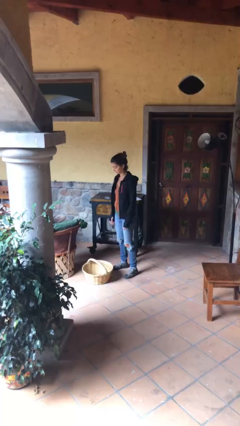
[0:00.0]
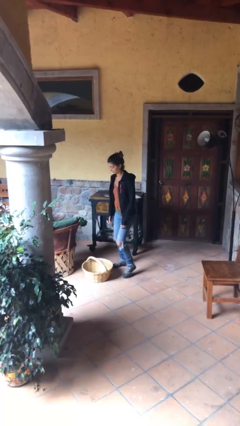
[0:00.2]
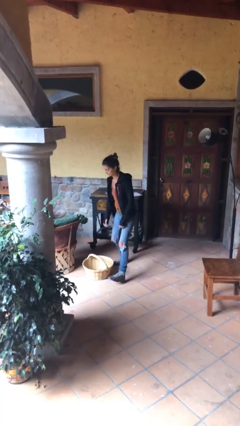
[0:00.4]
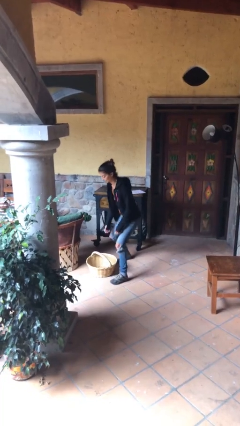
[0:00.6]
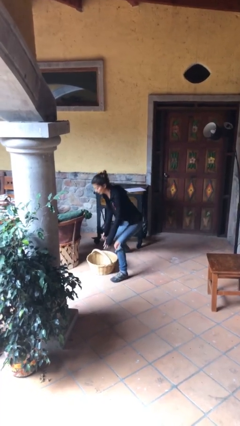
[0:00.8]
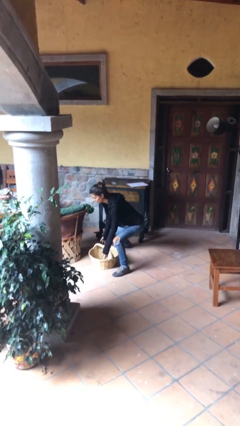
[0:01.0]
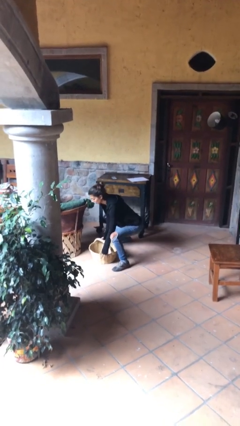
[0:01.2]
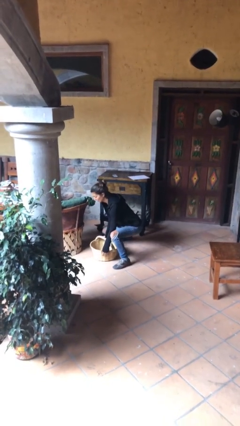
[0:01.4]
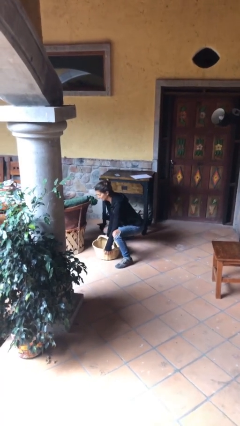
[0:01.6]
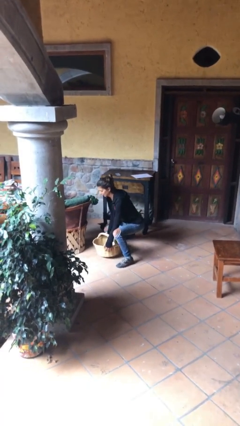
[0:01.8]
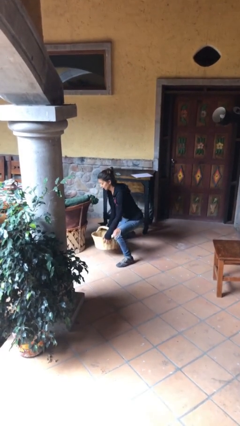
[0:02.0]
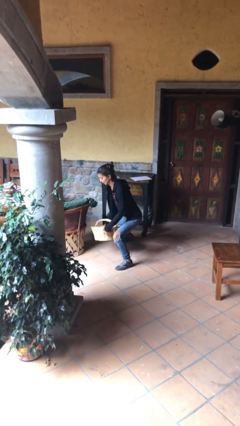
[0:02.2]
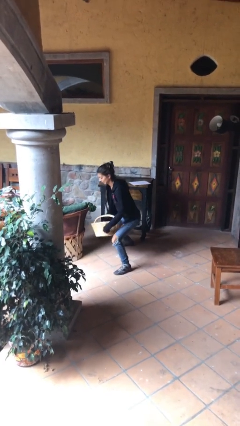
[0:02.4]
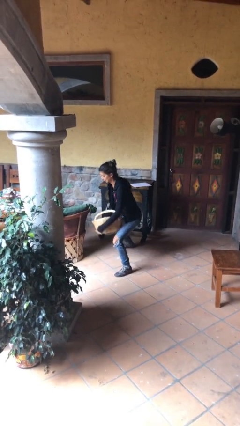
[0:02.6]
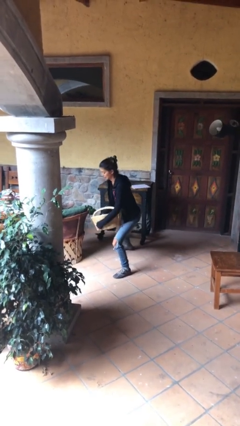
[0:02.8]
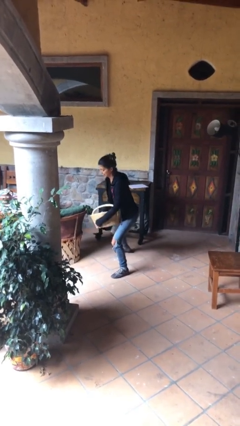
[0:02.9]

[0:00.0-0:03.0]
person picks up object from floor

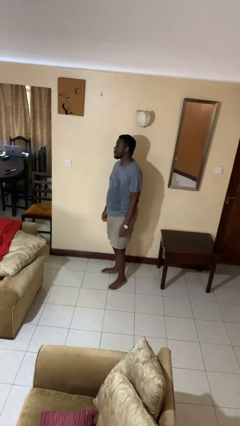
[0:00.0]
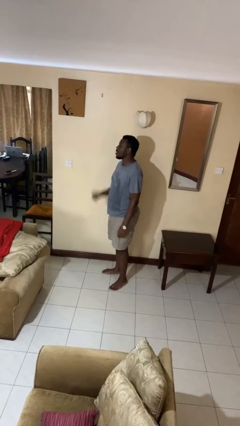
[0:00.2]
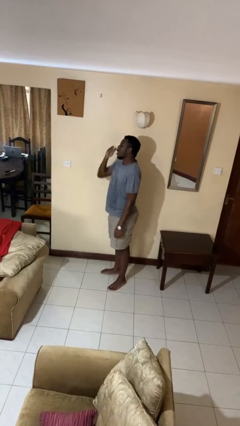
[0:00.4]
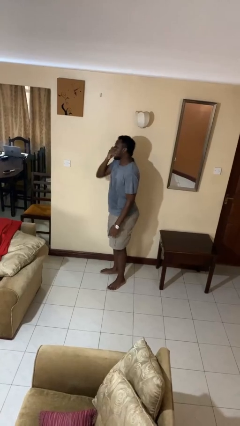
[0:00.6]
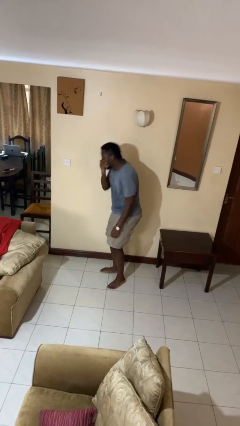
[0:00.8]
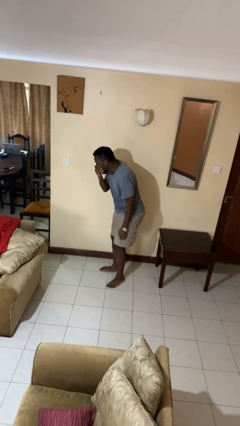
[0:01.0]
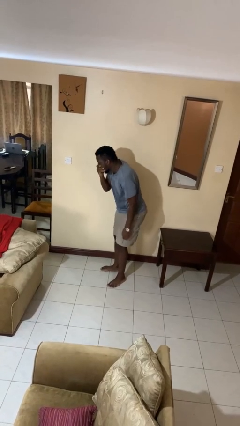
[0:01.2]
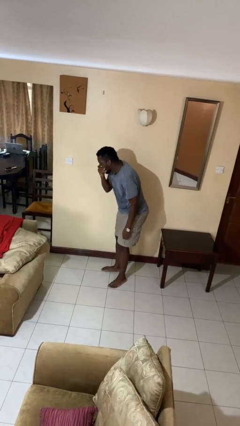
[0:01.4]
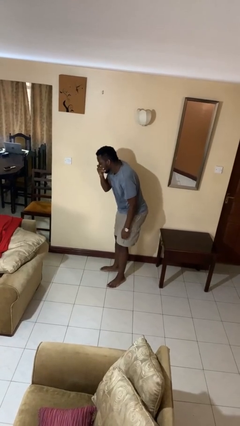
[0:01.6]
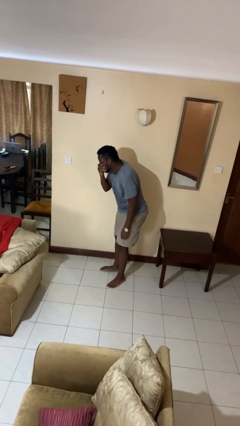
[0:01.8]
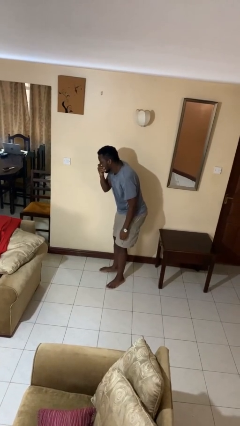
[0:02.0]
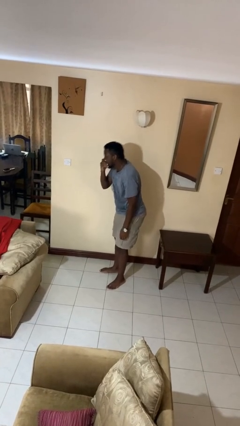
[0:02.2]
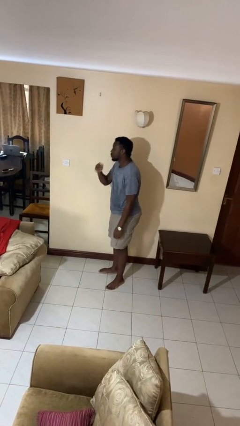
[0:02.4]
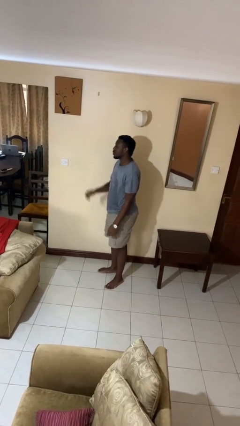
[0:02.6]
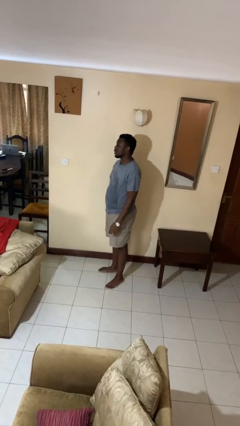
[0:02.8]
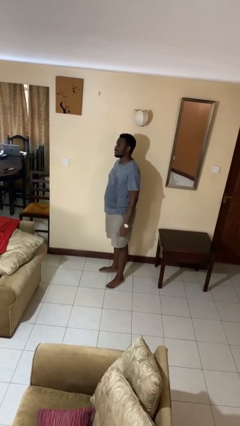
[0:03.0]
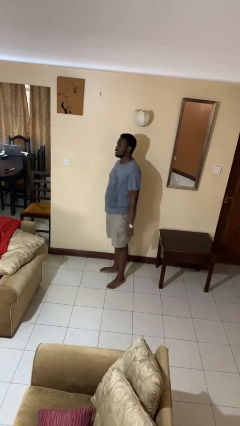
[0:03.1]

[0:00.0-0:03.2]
person sneezes into hand

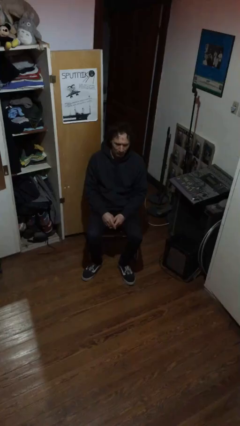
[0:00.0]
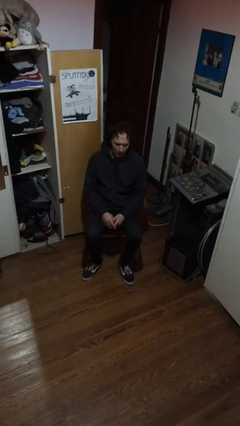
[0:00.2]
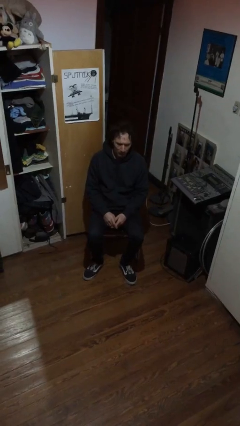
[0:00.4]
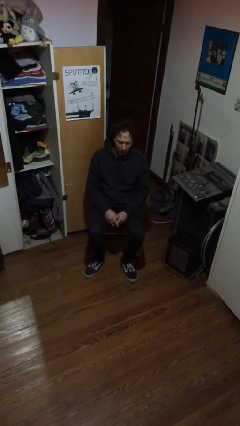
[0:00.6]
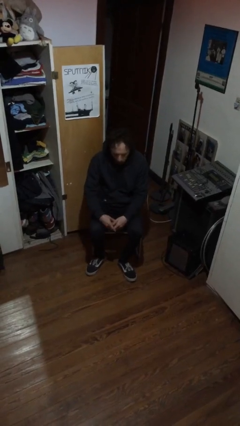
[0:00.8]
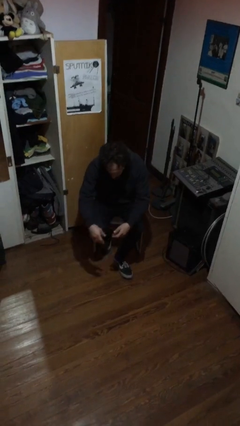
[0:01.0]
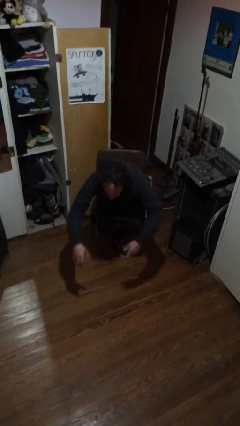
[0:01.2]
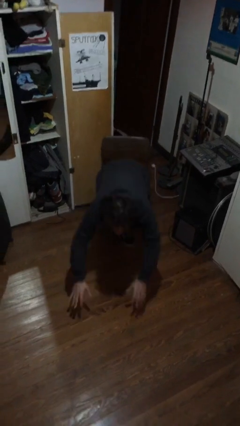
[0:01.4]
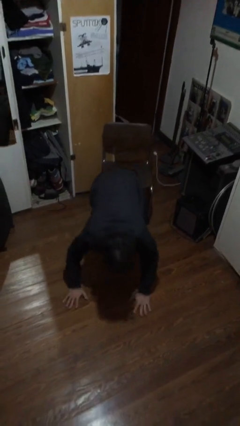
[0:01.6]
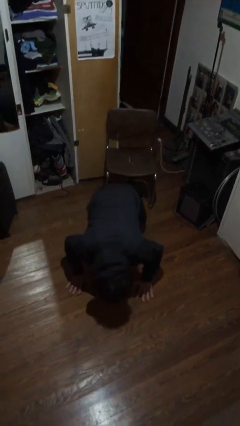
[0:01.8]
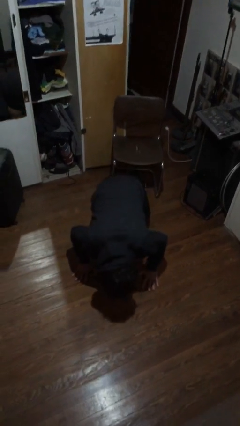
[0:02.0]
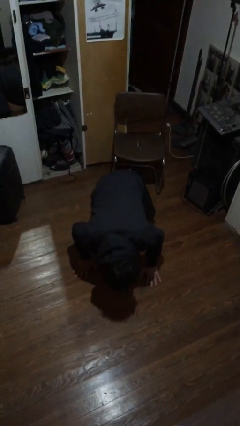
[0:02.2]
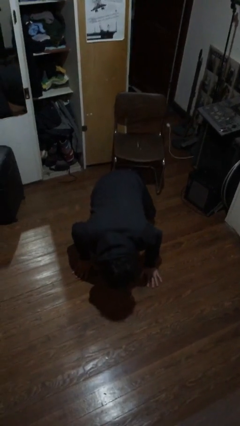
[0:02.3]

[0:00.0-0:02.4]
person falls from chair

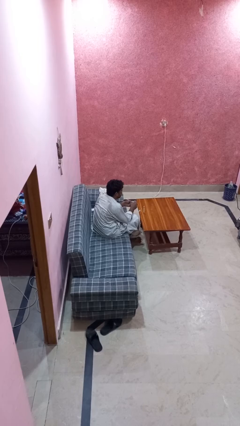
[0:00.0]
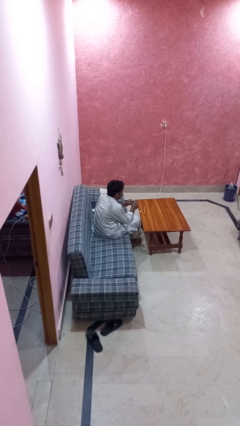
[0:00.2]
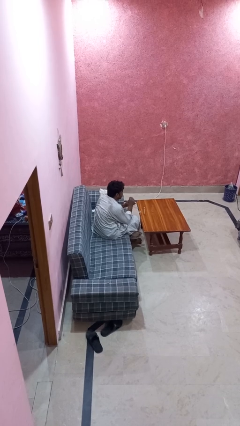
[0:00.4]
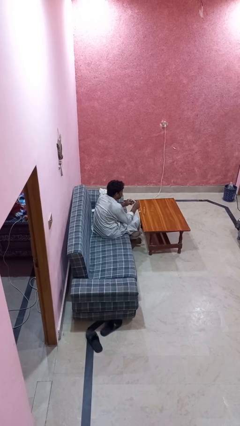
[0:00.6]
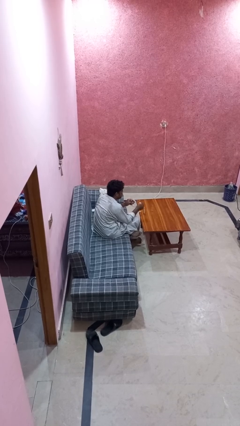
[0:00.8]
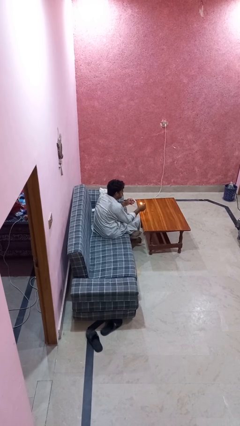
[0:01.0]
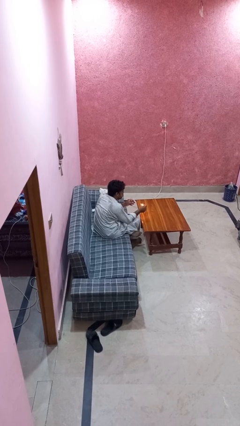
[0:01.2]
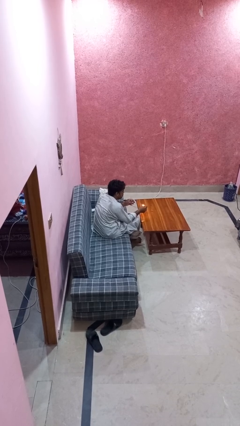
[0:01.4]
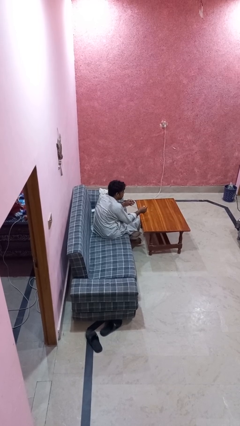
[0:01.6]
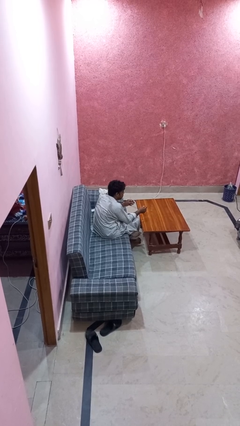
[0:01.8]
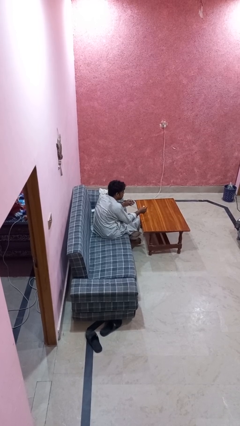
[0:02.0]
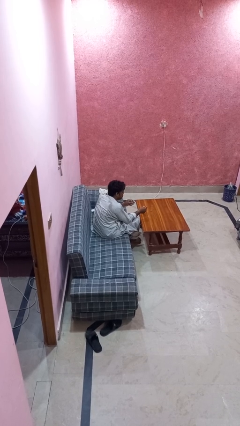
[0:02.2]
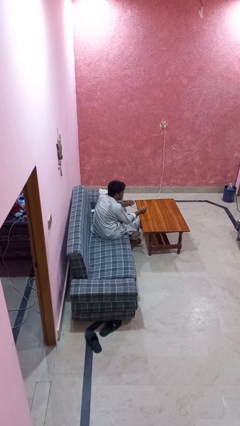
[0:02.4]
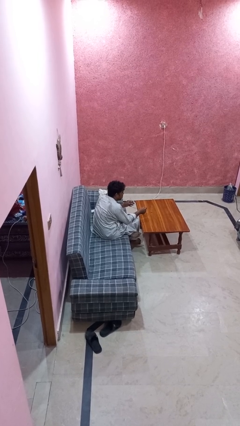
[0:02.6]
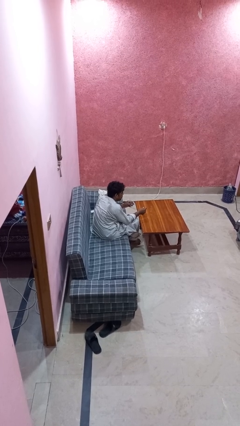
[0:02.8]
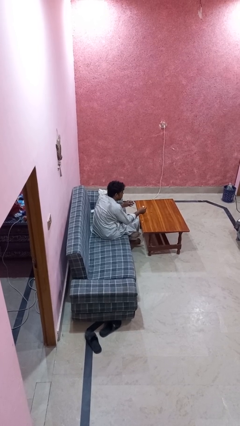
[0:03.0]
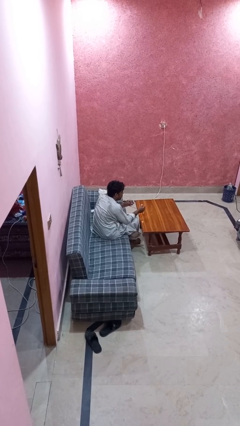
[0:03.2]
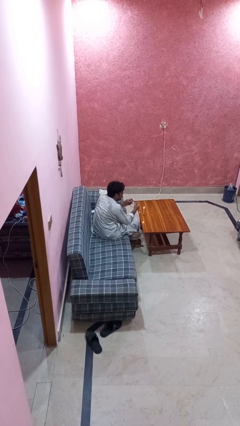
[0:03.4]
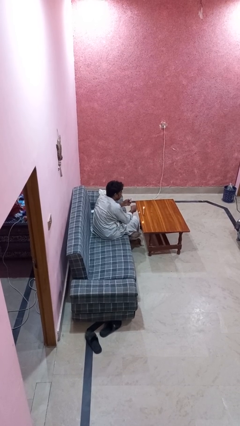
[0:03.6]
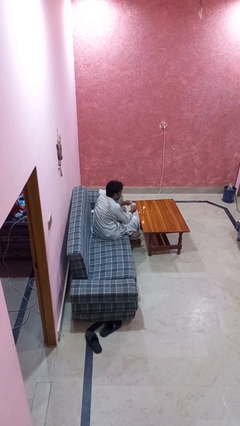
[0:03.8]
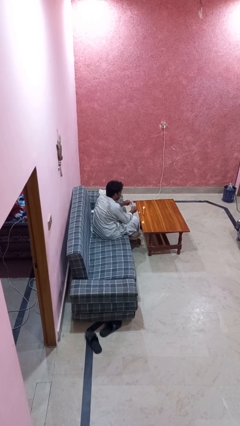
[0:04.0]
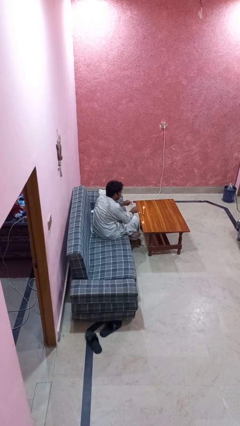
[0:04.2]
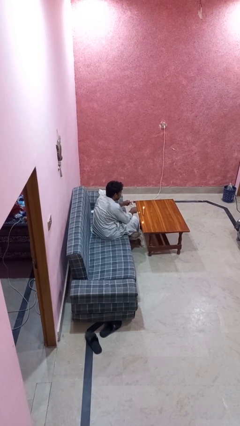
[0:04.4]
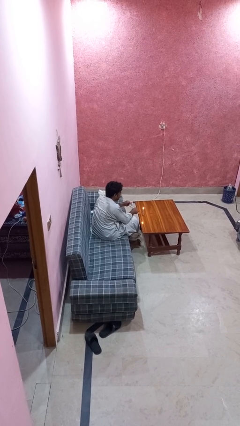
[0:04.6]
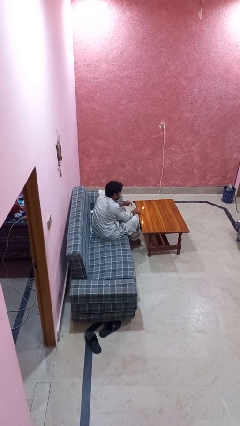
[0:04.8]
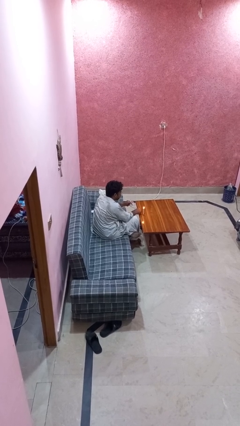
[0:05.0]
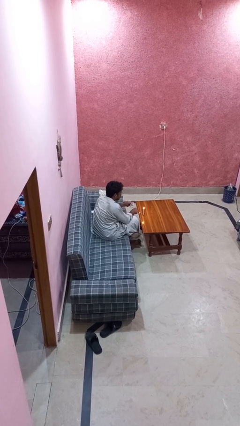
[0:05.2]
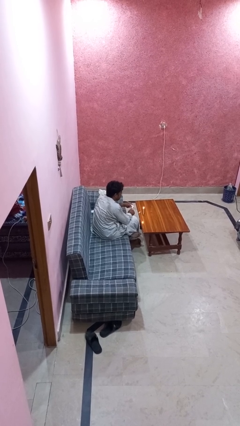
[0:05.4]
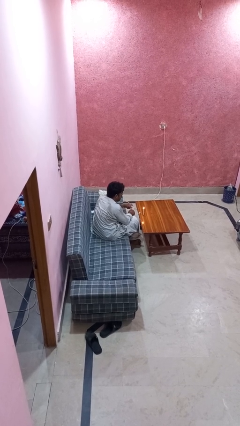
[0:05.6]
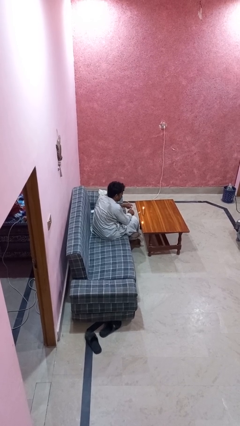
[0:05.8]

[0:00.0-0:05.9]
person lights candle

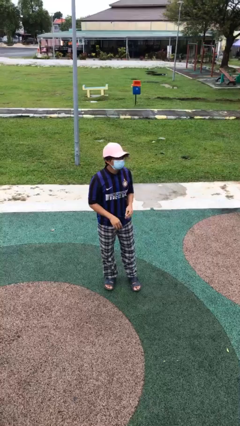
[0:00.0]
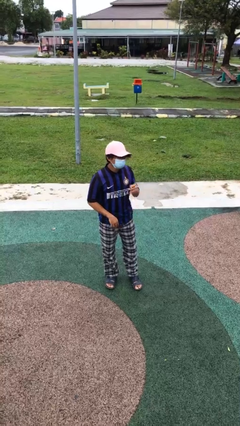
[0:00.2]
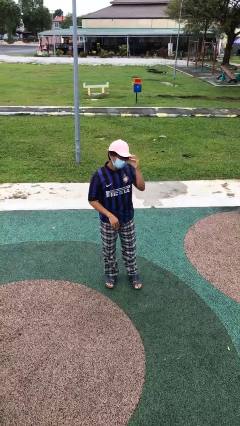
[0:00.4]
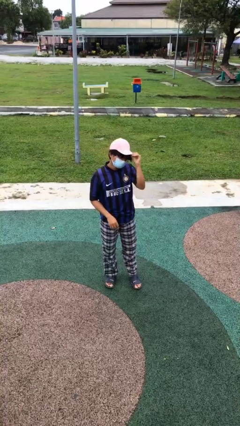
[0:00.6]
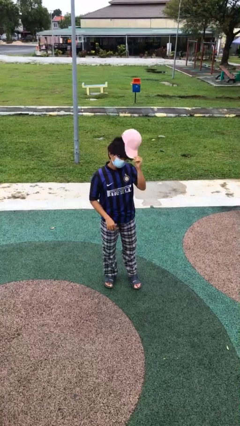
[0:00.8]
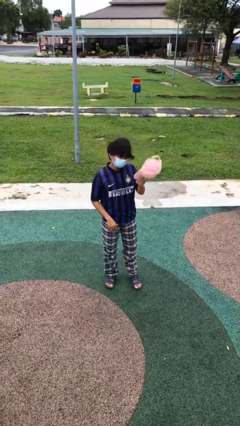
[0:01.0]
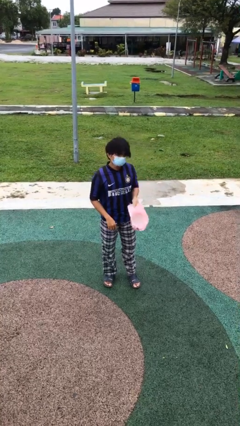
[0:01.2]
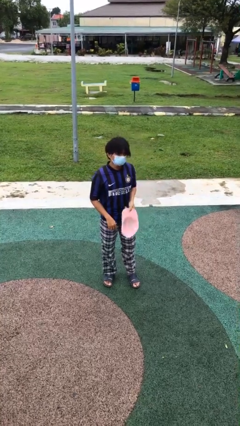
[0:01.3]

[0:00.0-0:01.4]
person takes off hat

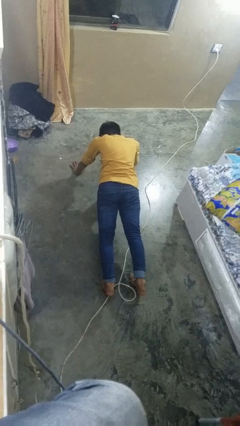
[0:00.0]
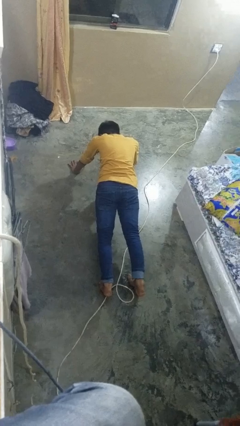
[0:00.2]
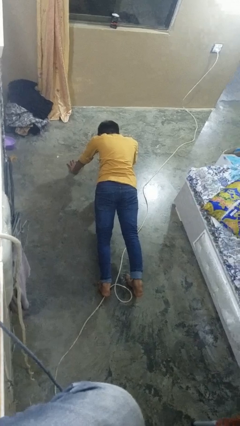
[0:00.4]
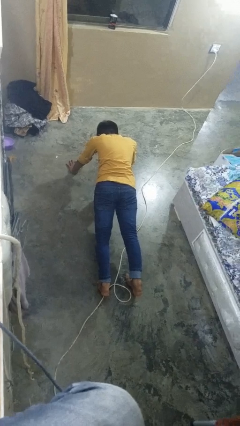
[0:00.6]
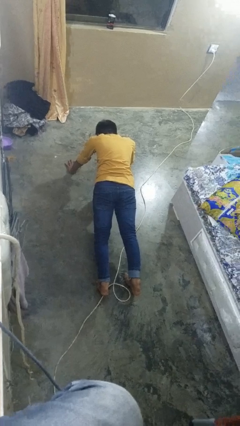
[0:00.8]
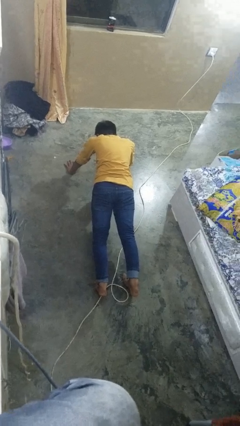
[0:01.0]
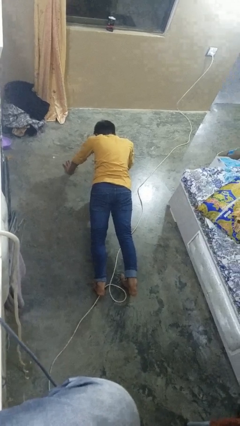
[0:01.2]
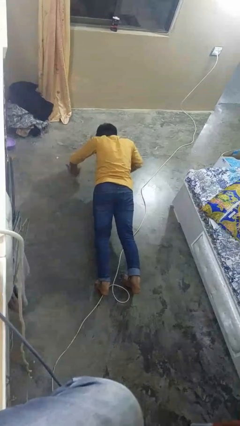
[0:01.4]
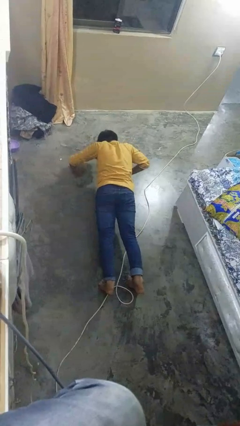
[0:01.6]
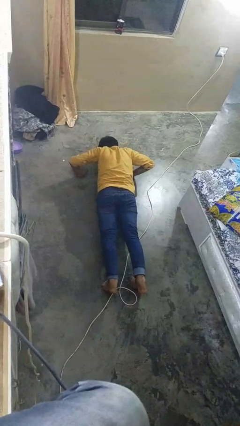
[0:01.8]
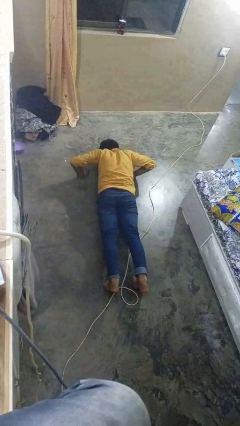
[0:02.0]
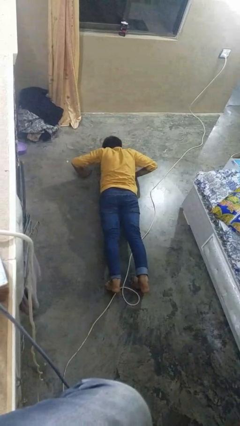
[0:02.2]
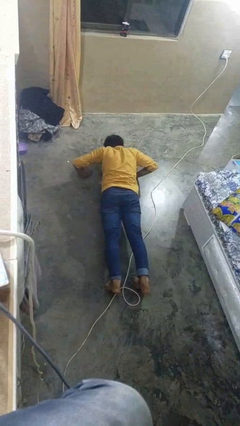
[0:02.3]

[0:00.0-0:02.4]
person exercises with pushup
